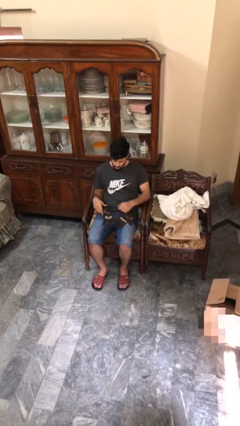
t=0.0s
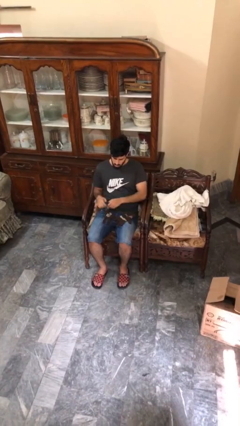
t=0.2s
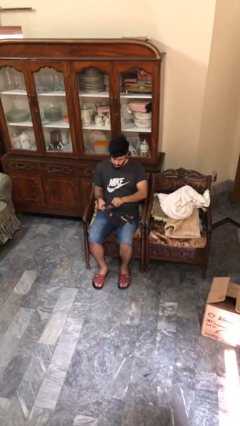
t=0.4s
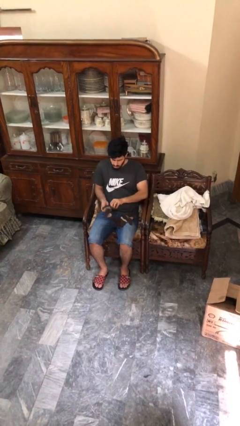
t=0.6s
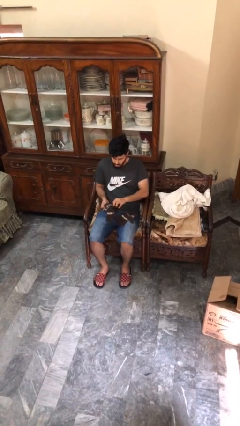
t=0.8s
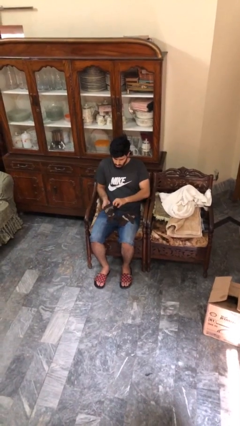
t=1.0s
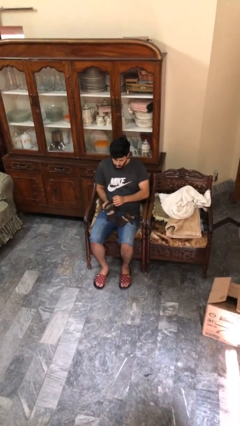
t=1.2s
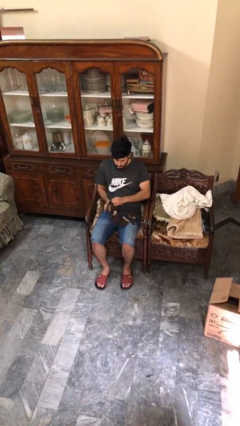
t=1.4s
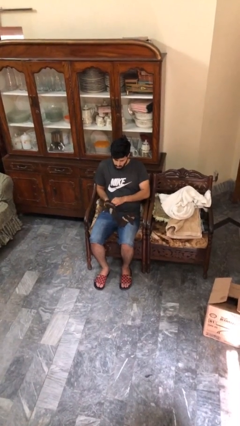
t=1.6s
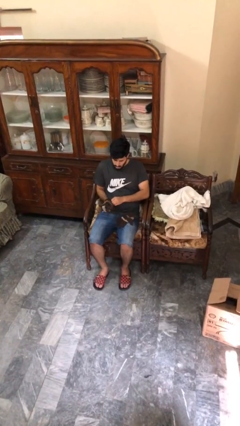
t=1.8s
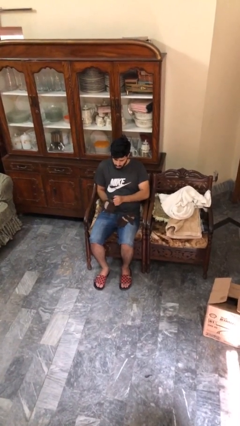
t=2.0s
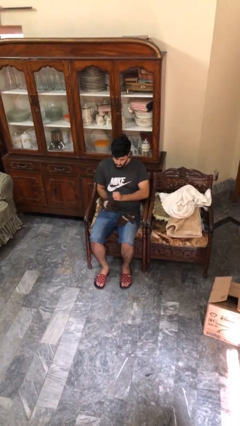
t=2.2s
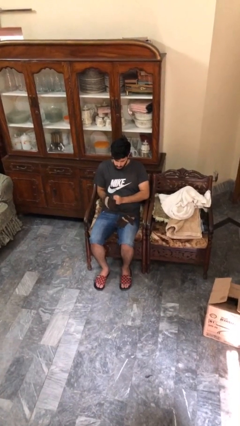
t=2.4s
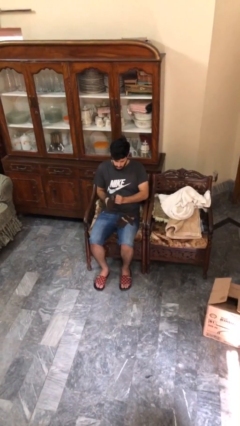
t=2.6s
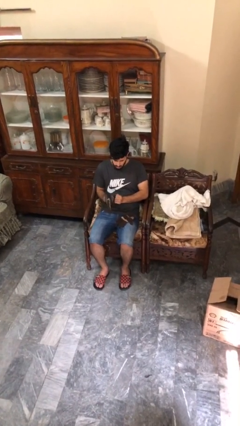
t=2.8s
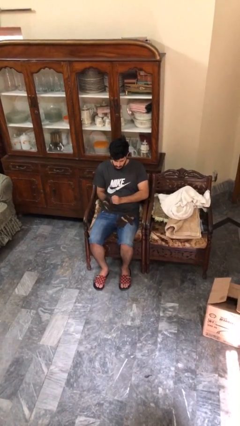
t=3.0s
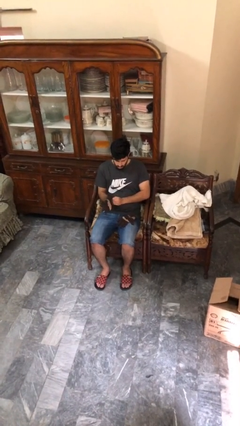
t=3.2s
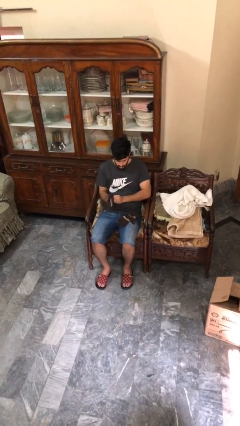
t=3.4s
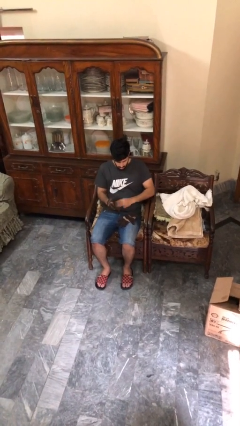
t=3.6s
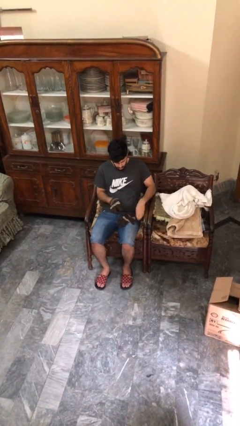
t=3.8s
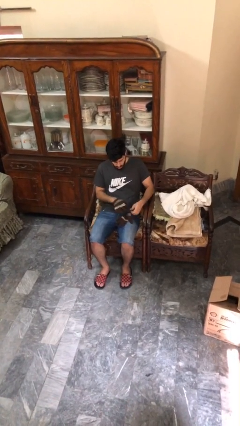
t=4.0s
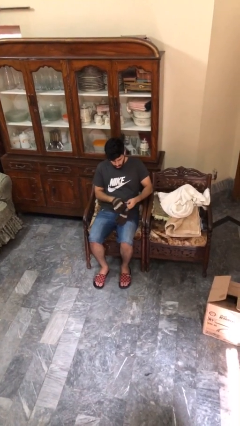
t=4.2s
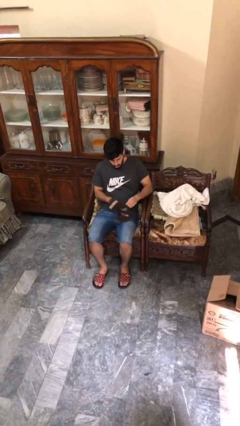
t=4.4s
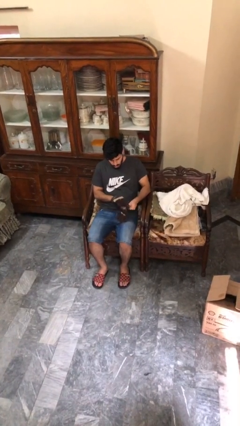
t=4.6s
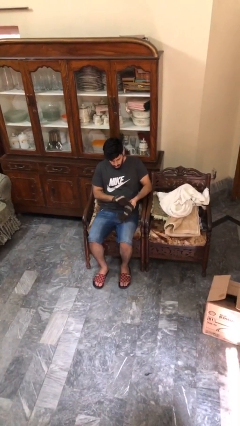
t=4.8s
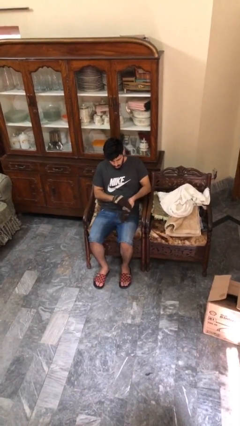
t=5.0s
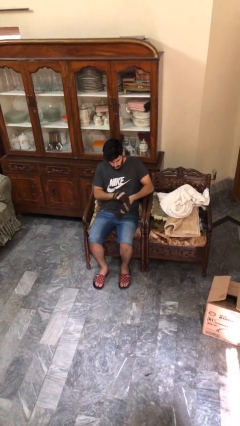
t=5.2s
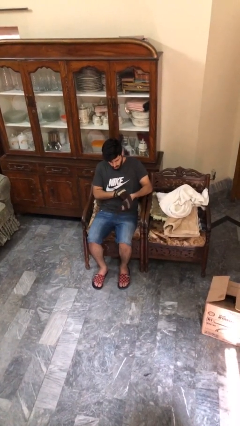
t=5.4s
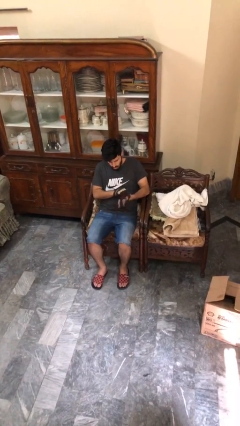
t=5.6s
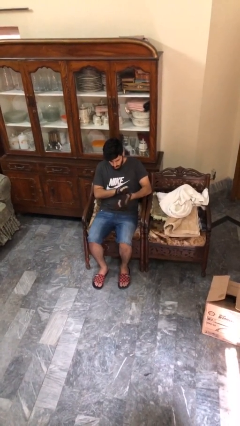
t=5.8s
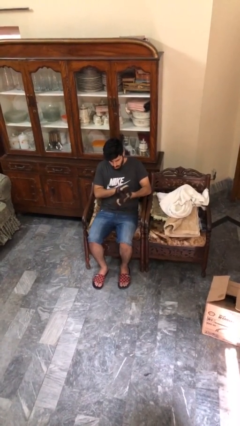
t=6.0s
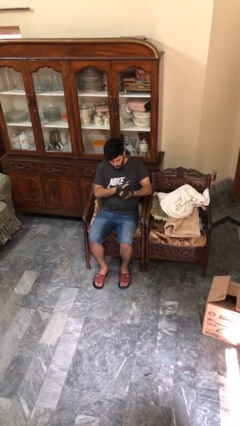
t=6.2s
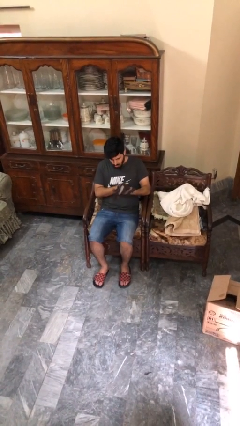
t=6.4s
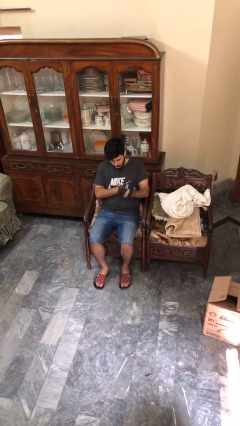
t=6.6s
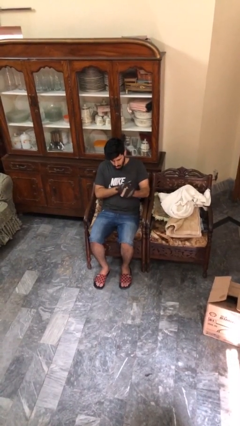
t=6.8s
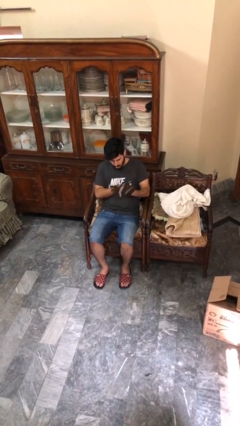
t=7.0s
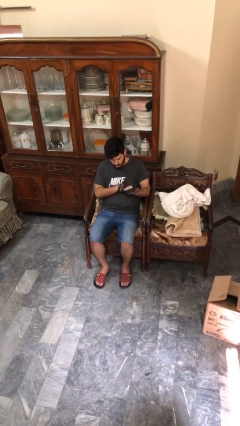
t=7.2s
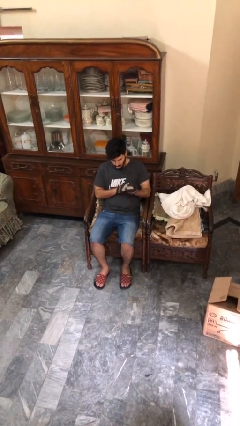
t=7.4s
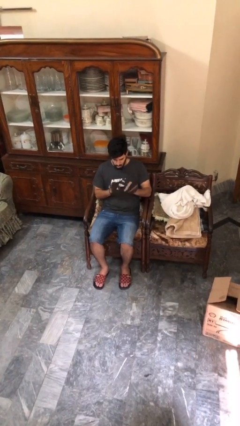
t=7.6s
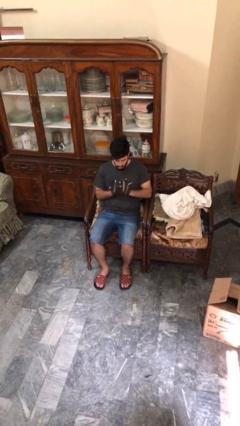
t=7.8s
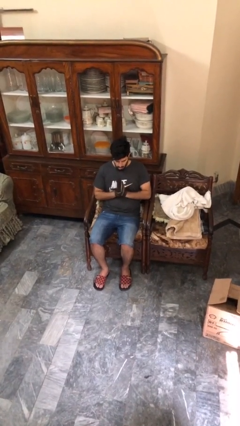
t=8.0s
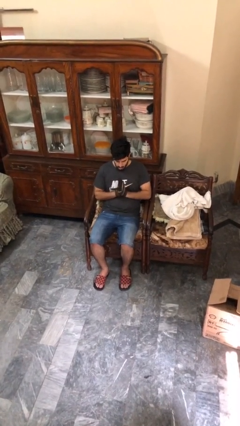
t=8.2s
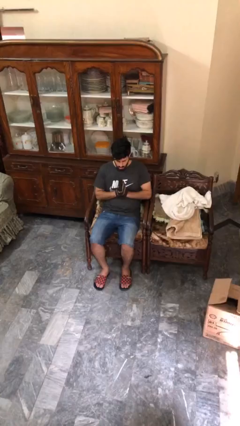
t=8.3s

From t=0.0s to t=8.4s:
person puts on gloves

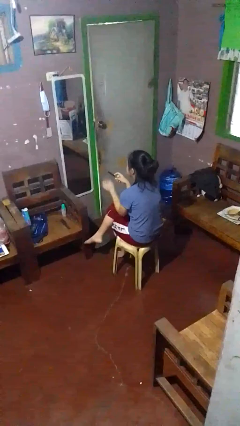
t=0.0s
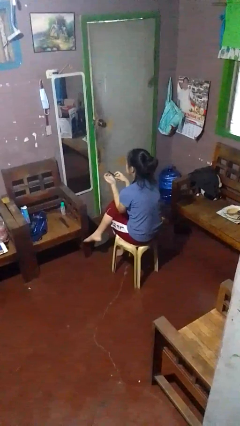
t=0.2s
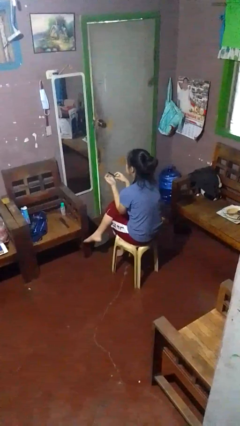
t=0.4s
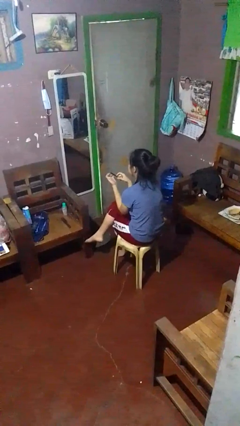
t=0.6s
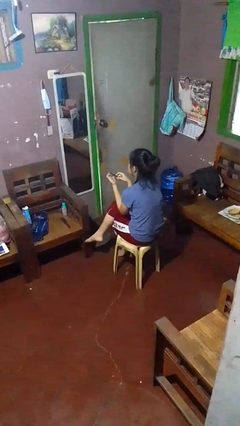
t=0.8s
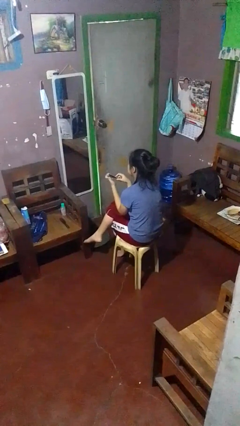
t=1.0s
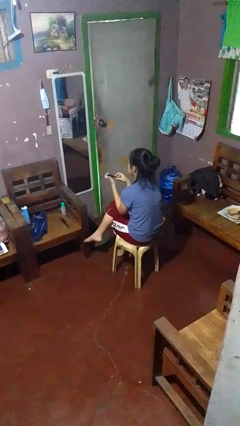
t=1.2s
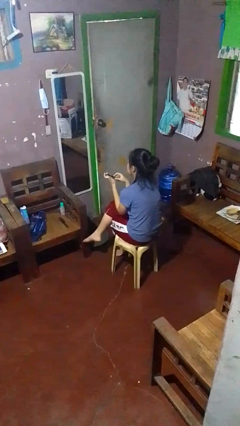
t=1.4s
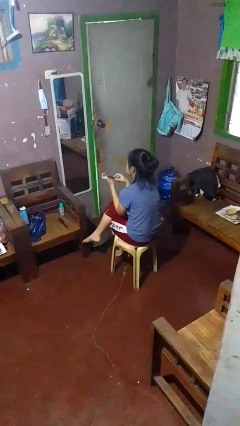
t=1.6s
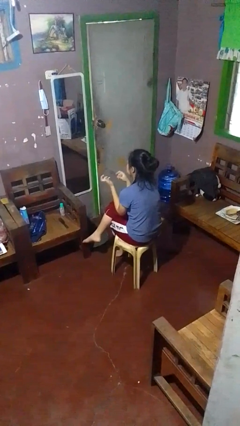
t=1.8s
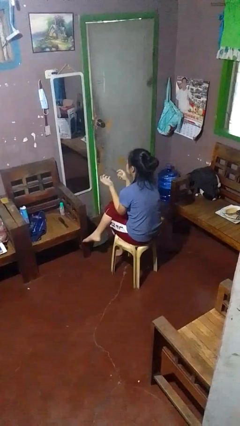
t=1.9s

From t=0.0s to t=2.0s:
person files fingernails

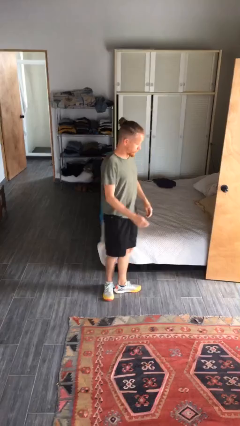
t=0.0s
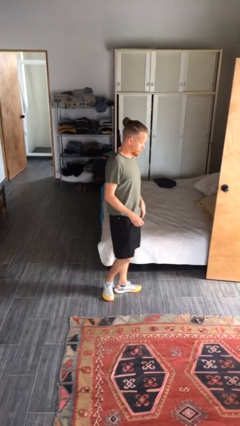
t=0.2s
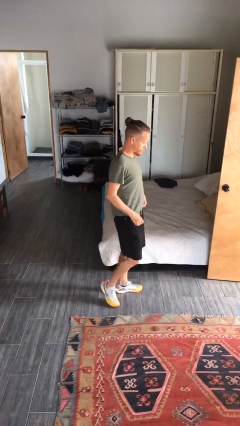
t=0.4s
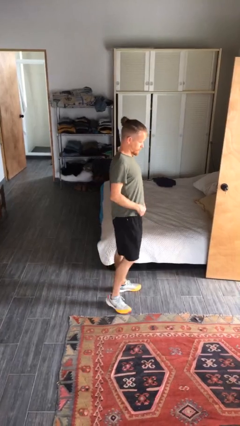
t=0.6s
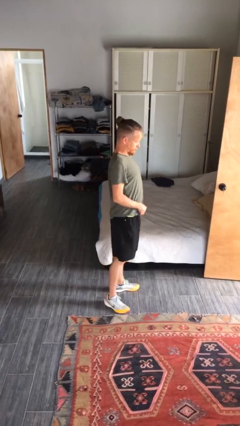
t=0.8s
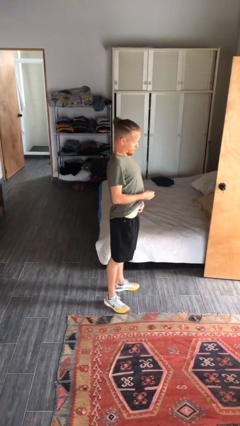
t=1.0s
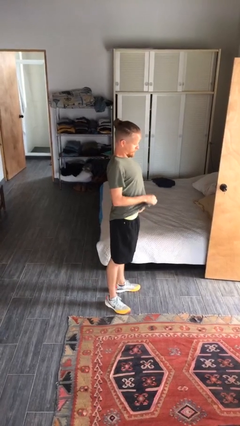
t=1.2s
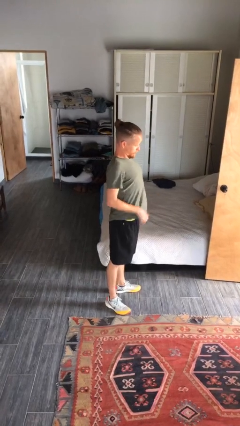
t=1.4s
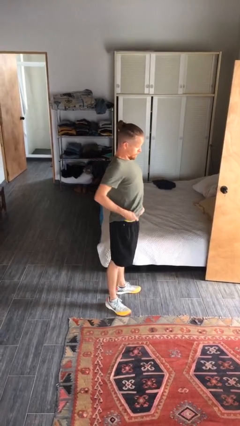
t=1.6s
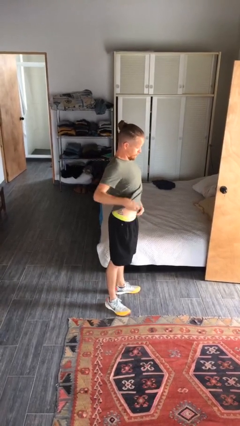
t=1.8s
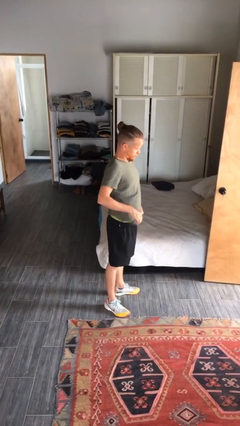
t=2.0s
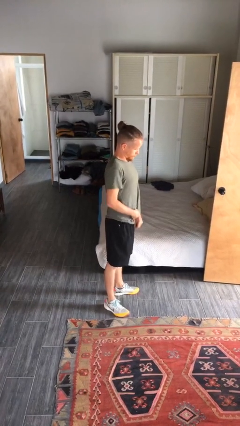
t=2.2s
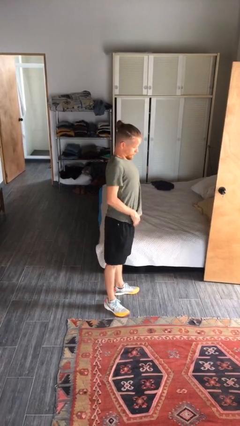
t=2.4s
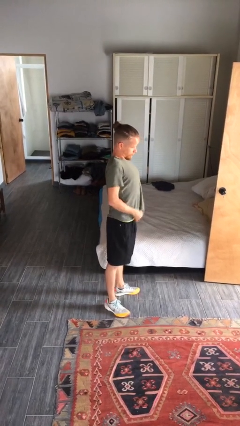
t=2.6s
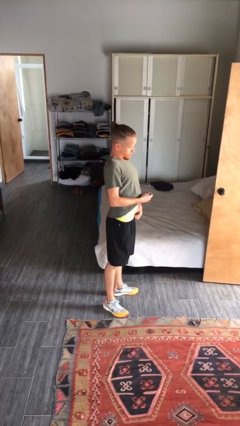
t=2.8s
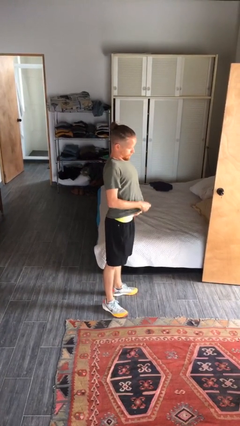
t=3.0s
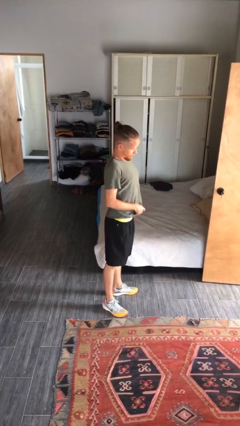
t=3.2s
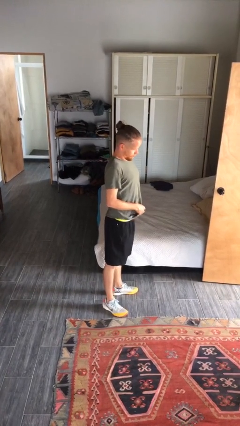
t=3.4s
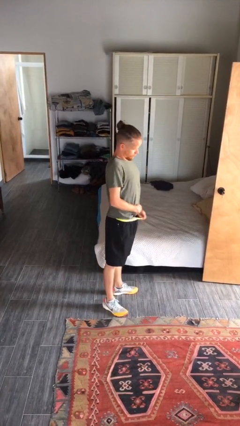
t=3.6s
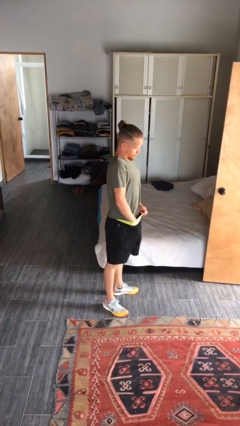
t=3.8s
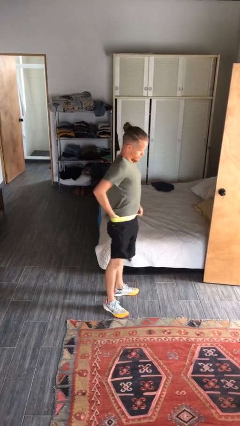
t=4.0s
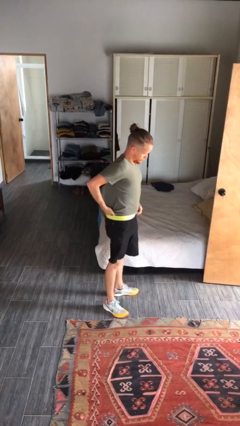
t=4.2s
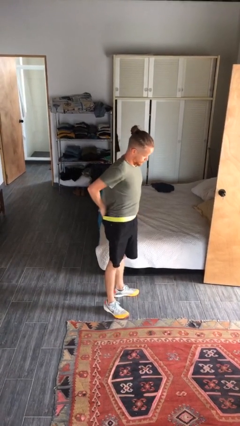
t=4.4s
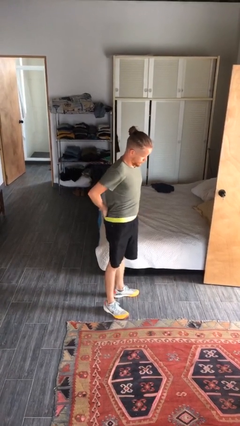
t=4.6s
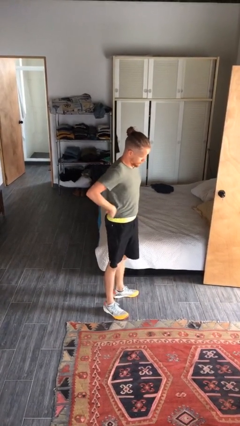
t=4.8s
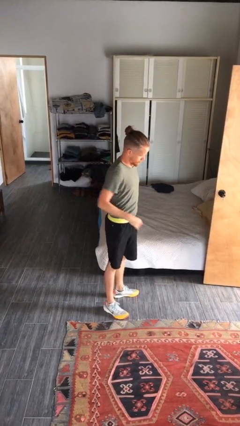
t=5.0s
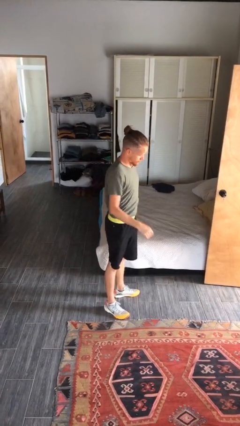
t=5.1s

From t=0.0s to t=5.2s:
person tucks in shirt

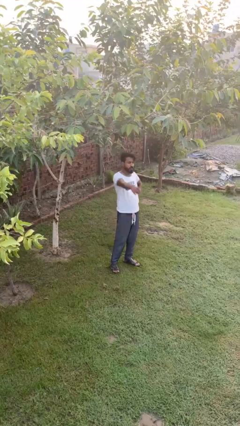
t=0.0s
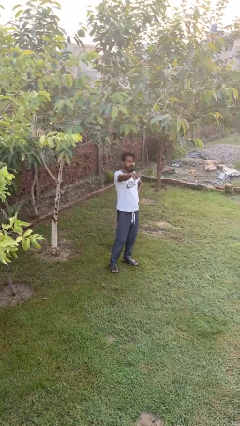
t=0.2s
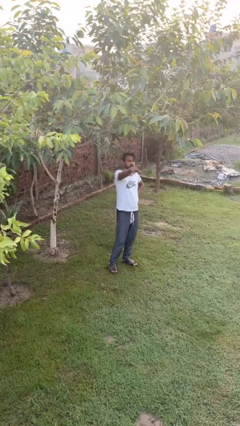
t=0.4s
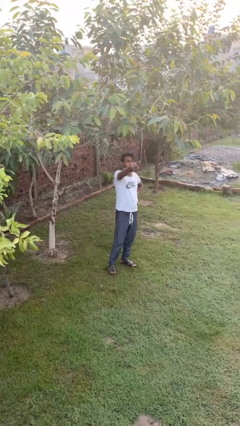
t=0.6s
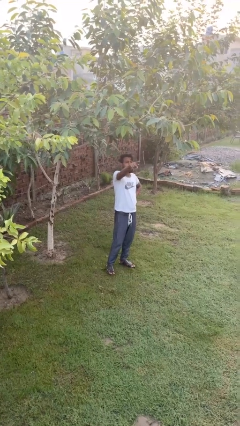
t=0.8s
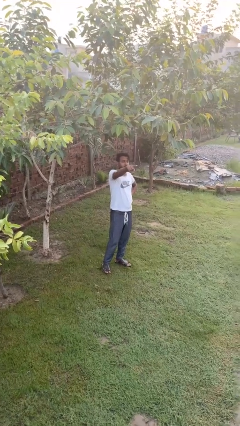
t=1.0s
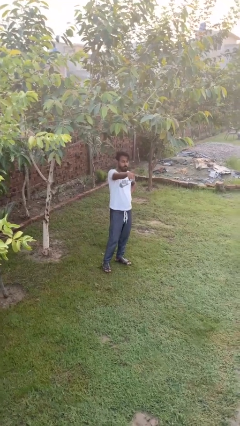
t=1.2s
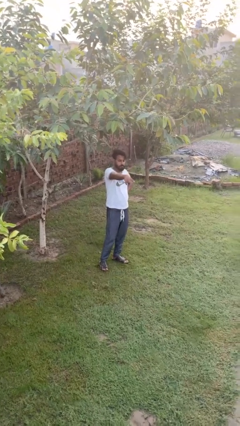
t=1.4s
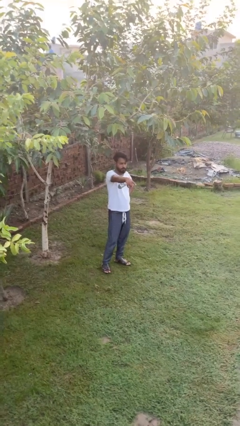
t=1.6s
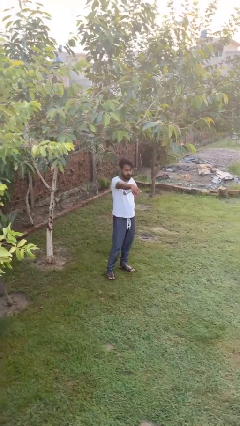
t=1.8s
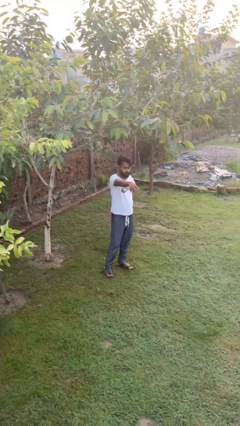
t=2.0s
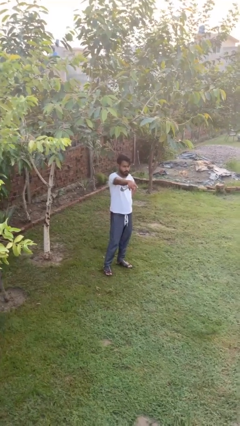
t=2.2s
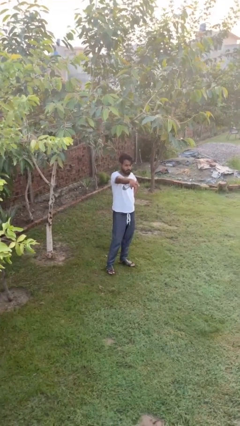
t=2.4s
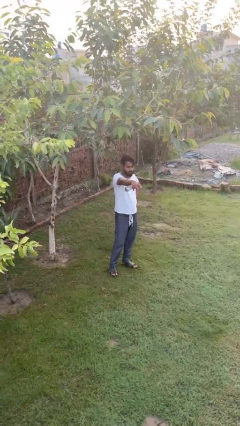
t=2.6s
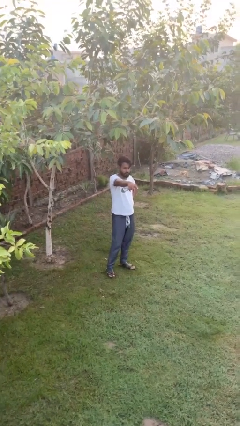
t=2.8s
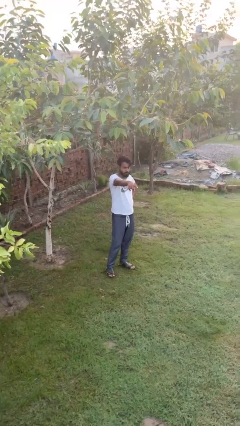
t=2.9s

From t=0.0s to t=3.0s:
person points at person
